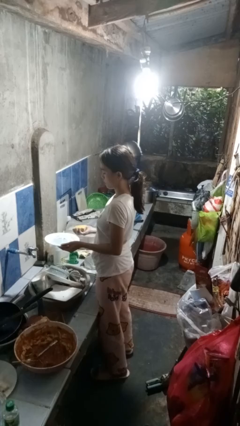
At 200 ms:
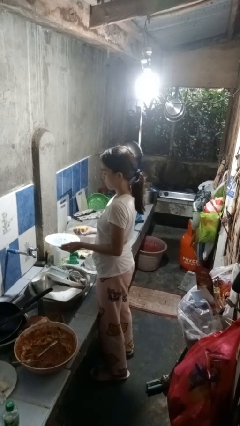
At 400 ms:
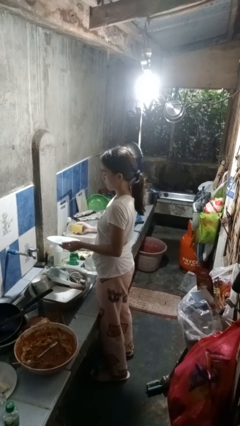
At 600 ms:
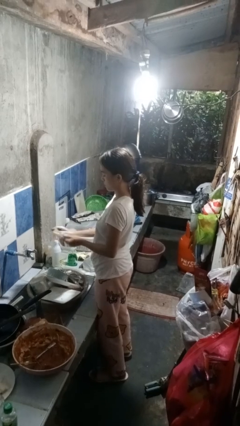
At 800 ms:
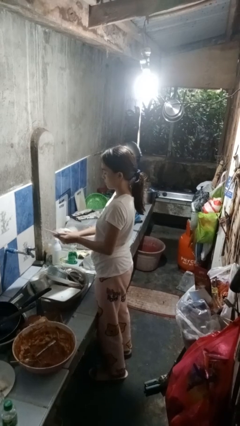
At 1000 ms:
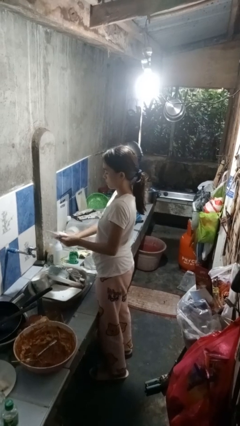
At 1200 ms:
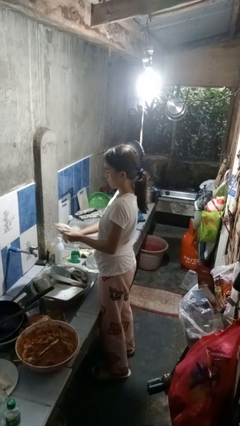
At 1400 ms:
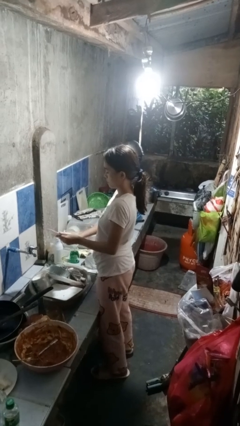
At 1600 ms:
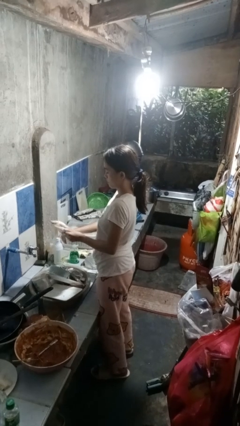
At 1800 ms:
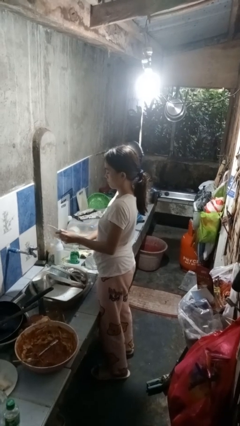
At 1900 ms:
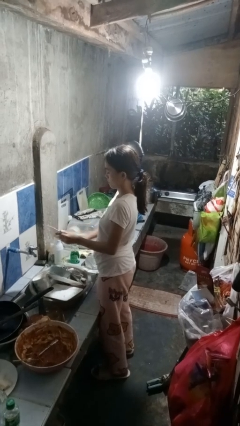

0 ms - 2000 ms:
person washes dish

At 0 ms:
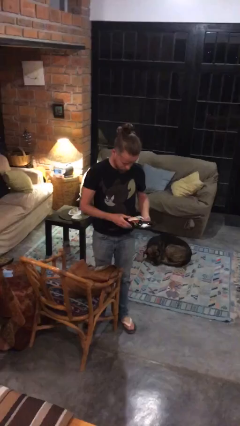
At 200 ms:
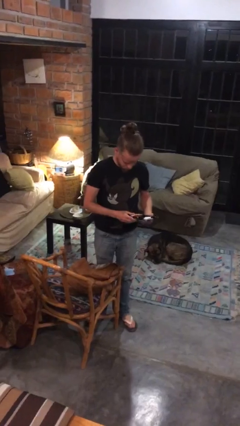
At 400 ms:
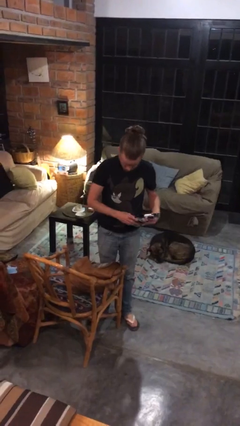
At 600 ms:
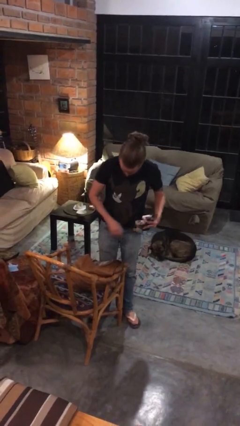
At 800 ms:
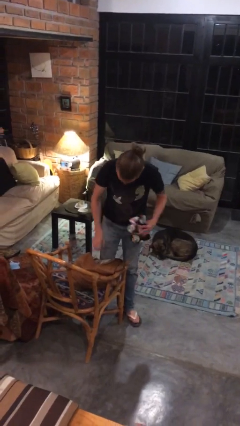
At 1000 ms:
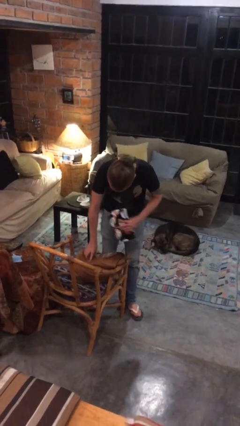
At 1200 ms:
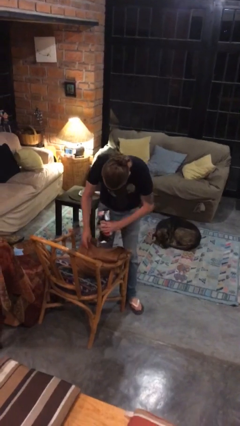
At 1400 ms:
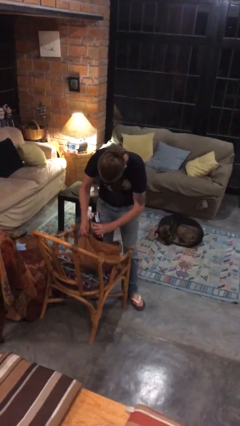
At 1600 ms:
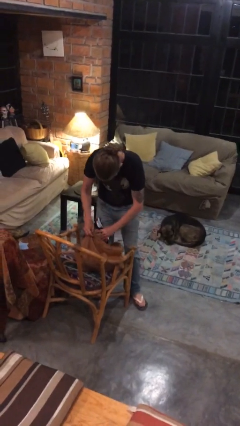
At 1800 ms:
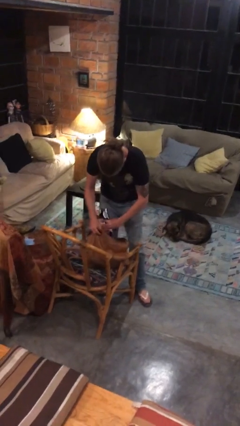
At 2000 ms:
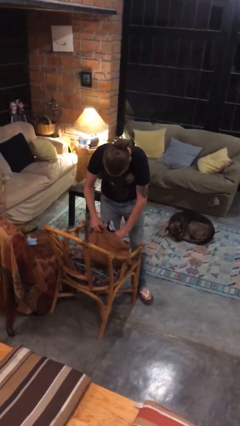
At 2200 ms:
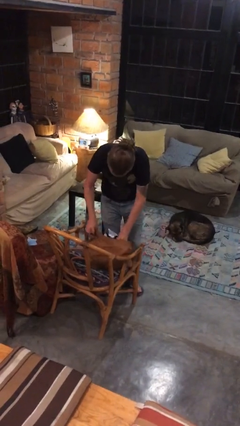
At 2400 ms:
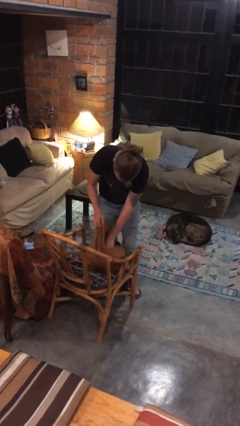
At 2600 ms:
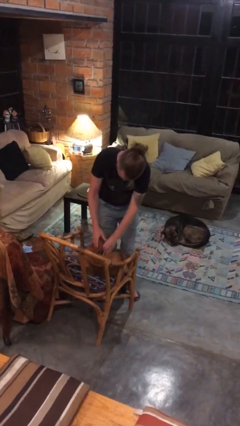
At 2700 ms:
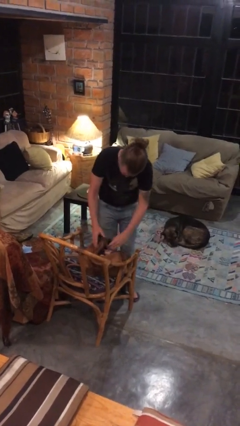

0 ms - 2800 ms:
person puts object into purse

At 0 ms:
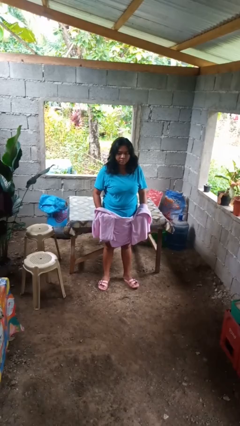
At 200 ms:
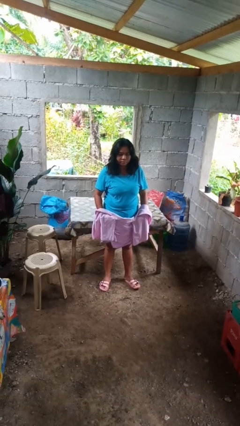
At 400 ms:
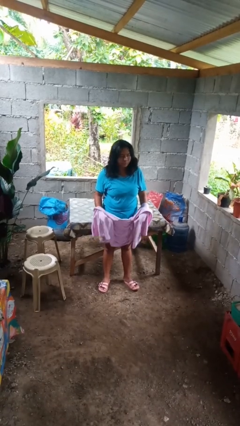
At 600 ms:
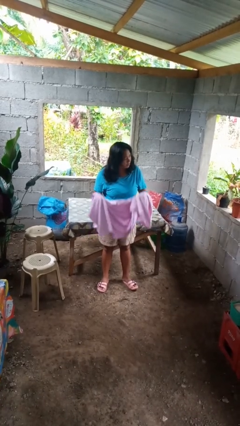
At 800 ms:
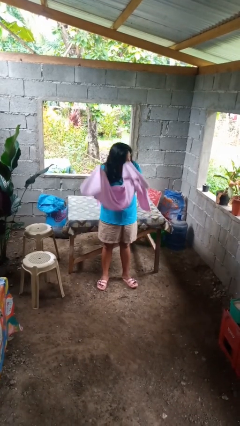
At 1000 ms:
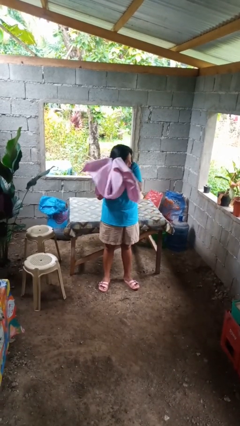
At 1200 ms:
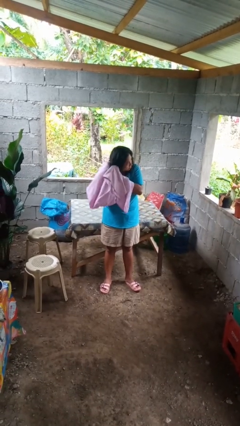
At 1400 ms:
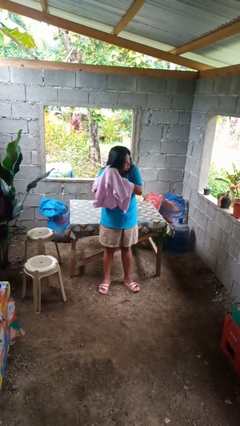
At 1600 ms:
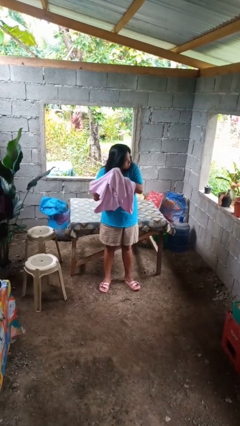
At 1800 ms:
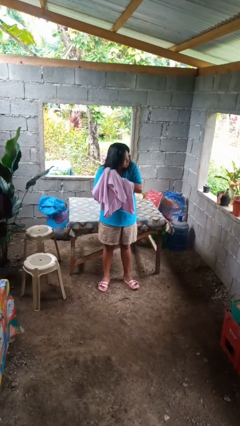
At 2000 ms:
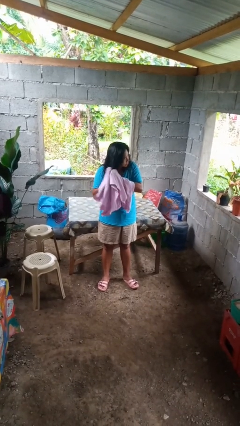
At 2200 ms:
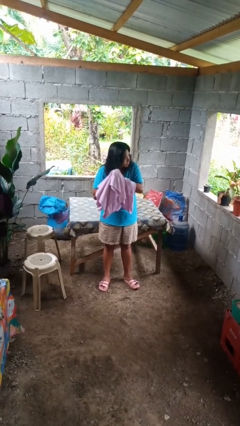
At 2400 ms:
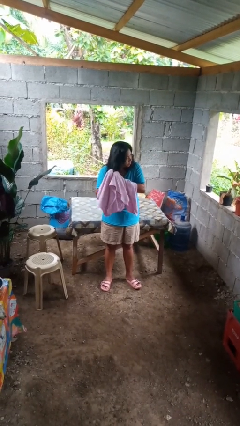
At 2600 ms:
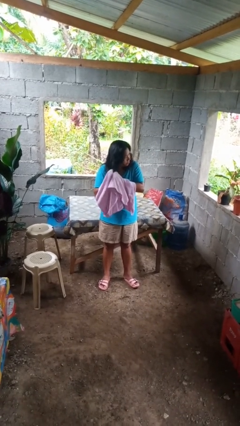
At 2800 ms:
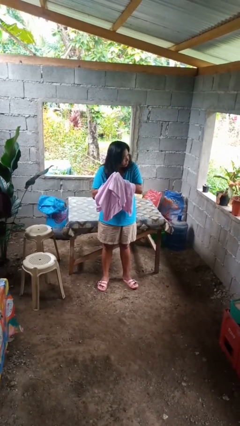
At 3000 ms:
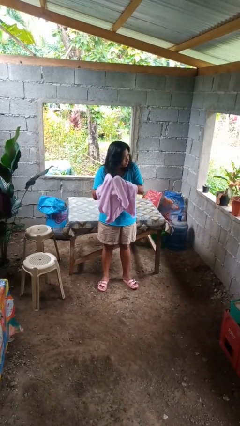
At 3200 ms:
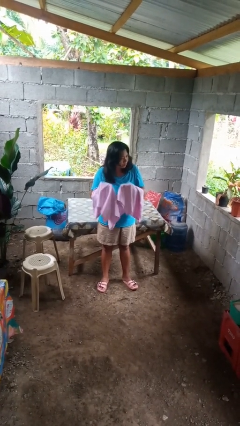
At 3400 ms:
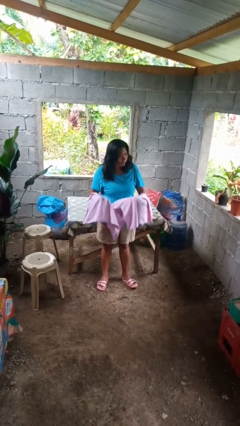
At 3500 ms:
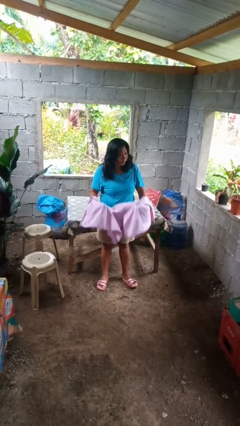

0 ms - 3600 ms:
person dries hair with towel

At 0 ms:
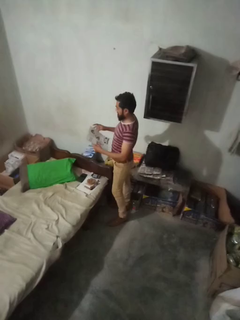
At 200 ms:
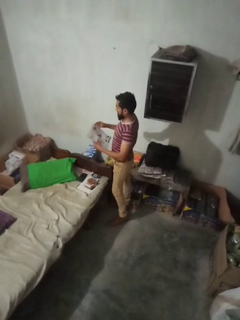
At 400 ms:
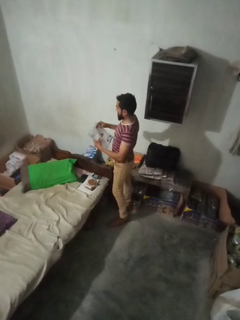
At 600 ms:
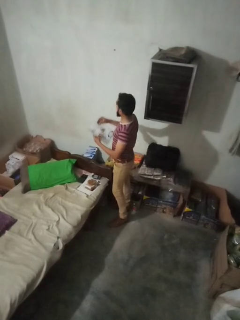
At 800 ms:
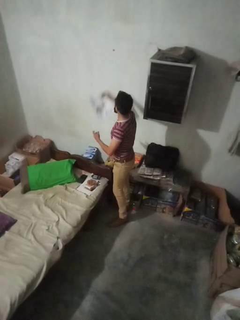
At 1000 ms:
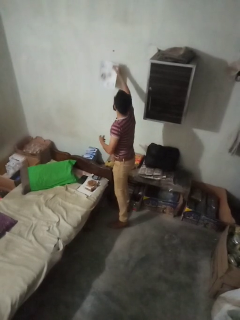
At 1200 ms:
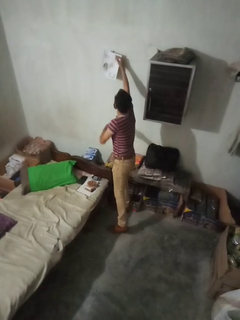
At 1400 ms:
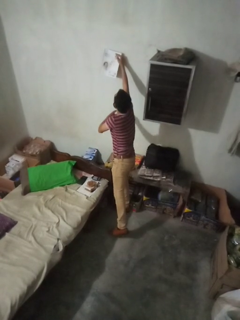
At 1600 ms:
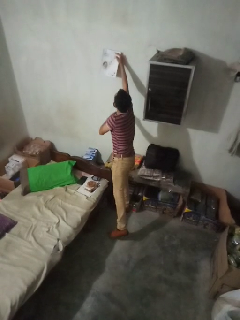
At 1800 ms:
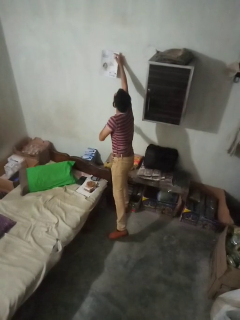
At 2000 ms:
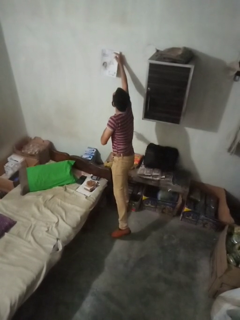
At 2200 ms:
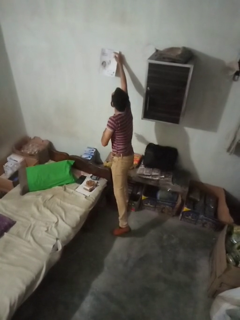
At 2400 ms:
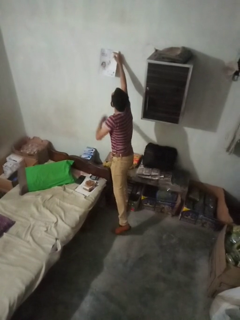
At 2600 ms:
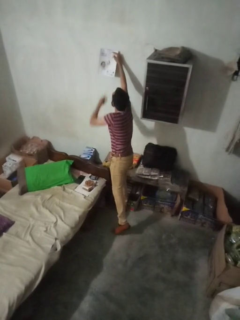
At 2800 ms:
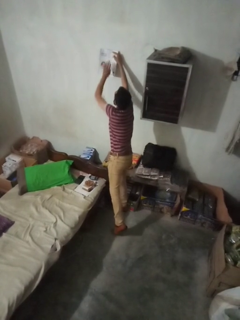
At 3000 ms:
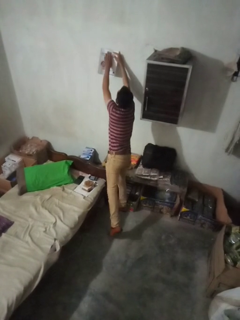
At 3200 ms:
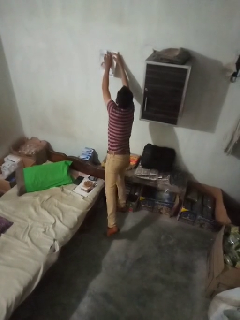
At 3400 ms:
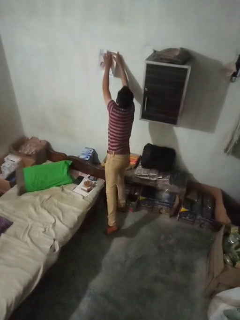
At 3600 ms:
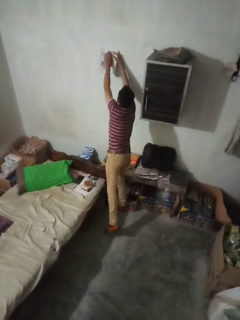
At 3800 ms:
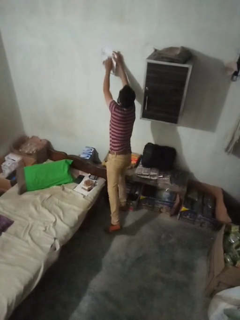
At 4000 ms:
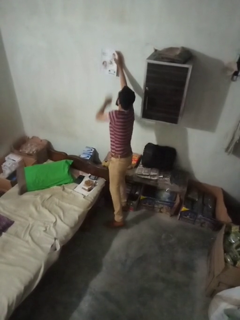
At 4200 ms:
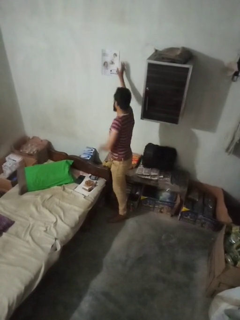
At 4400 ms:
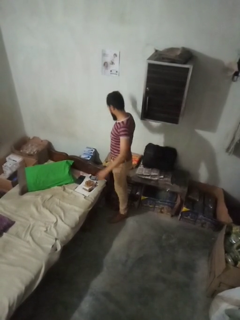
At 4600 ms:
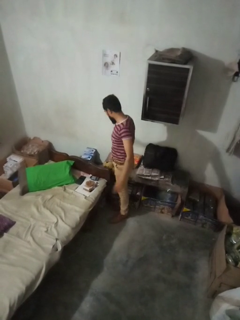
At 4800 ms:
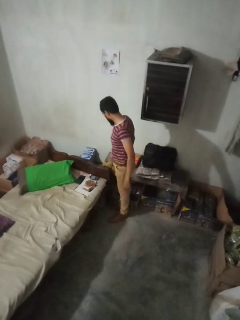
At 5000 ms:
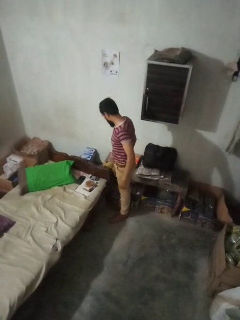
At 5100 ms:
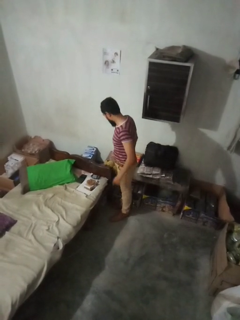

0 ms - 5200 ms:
person puts up picture frame

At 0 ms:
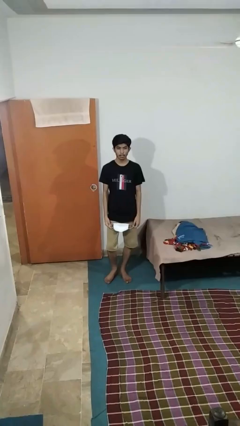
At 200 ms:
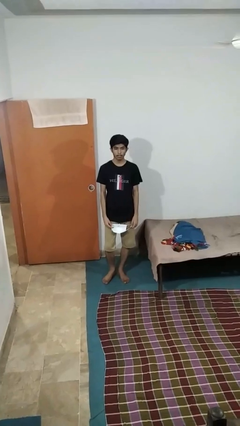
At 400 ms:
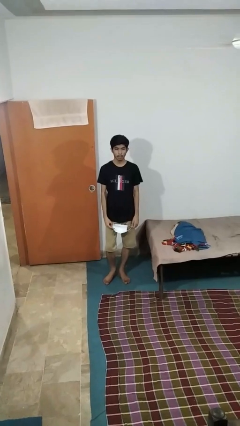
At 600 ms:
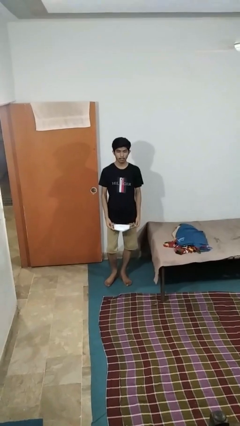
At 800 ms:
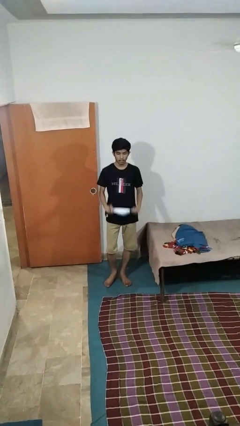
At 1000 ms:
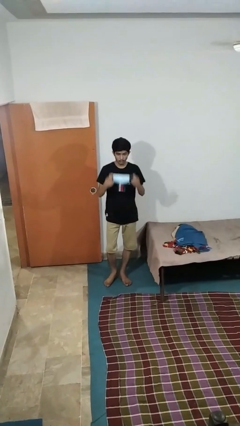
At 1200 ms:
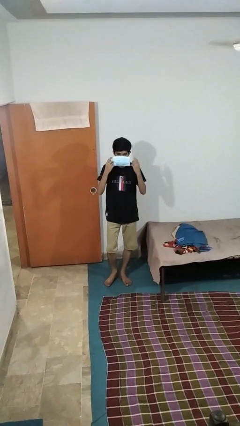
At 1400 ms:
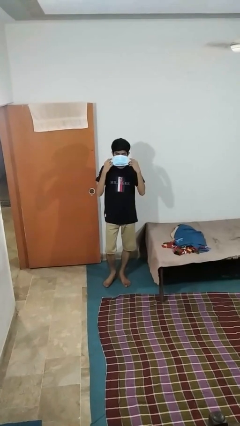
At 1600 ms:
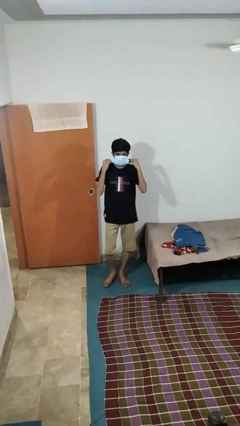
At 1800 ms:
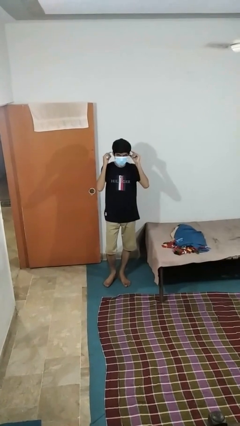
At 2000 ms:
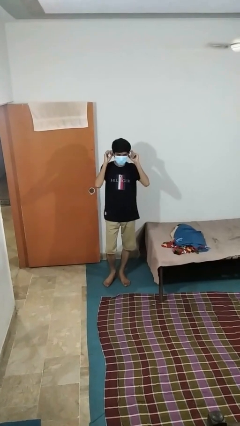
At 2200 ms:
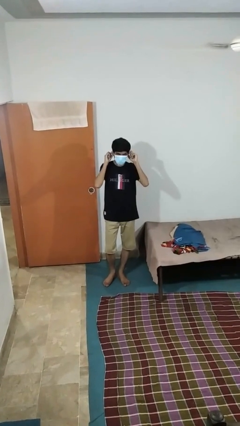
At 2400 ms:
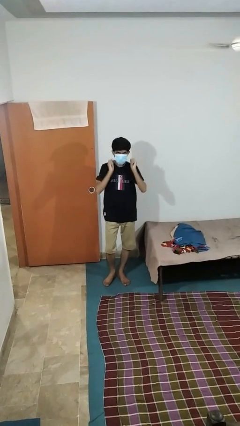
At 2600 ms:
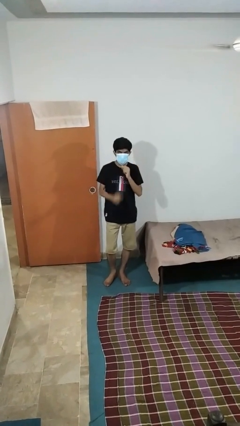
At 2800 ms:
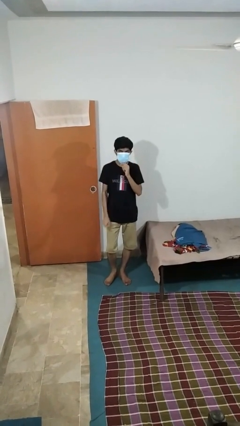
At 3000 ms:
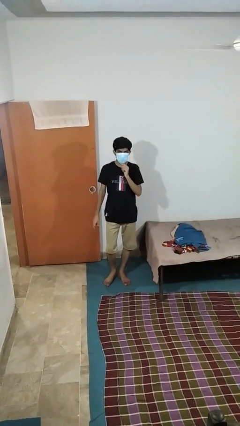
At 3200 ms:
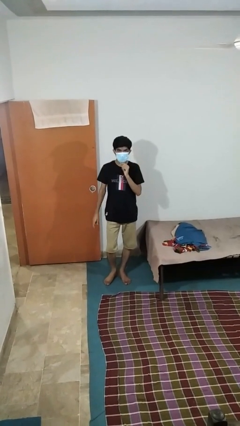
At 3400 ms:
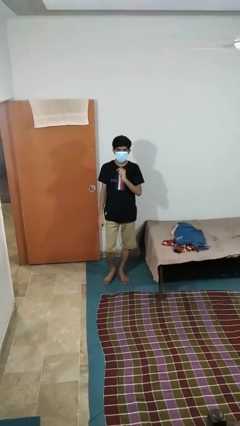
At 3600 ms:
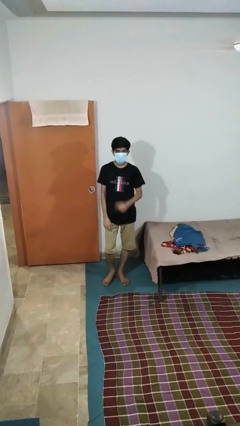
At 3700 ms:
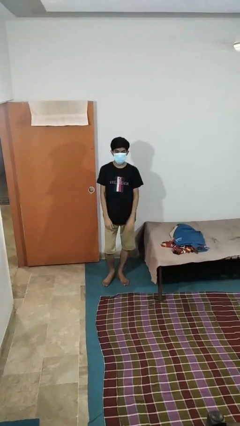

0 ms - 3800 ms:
person puts on facemask

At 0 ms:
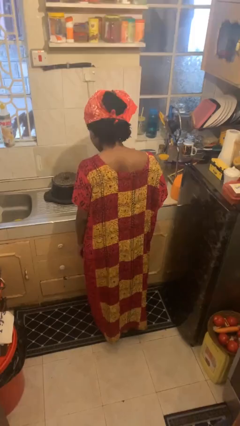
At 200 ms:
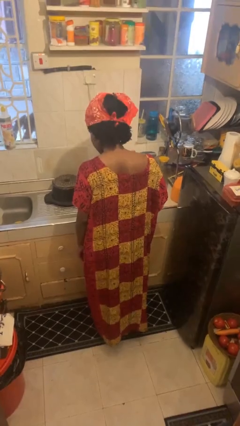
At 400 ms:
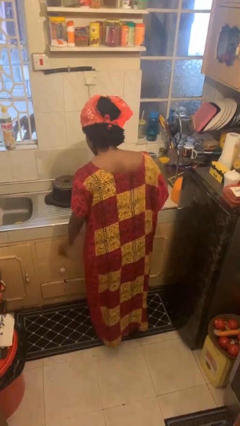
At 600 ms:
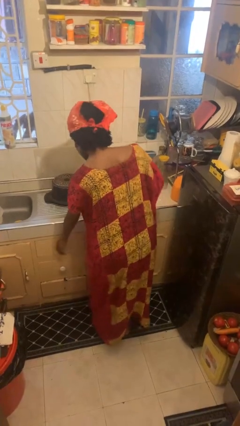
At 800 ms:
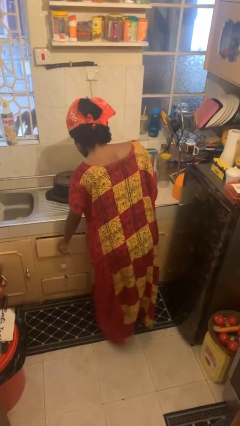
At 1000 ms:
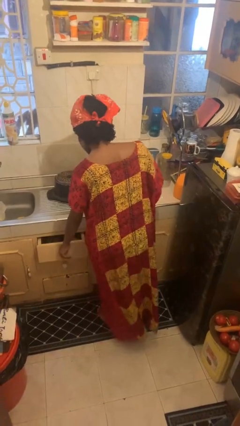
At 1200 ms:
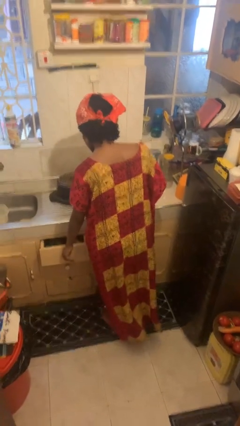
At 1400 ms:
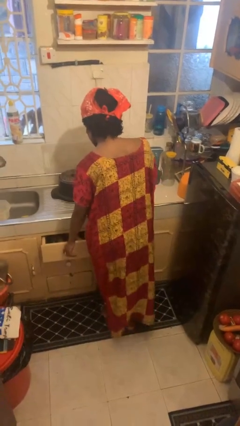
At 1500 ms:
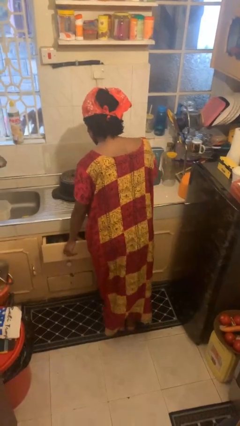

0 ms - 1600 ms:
person opens kitchen drawer
